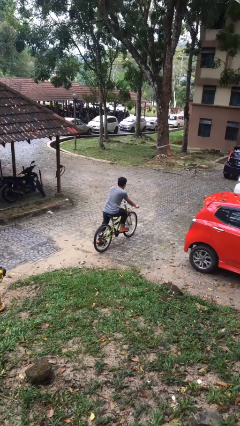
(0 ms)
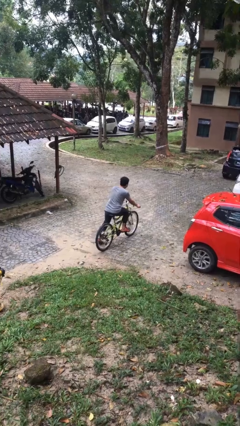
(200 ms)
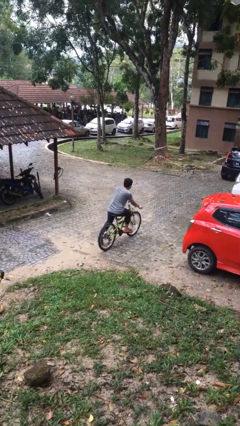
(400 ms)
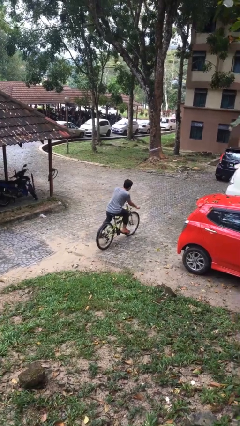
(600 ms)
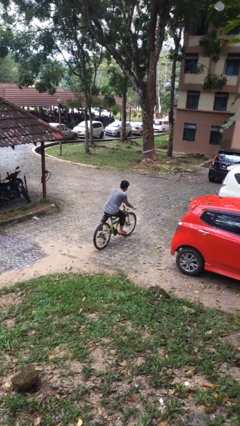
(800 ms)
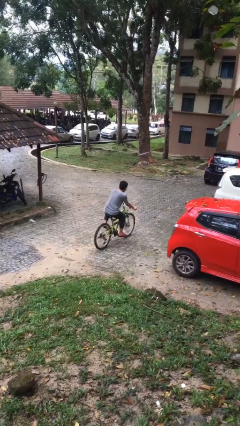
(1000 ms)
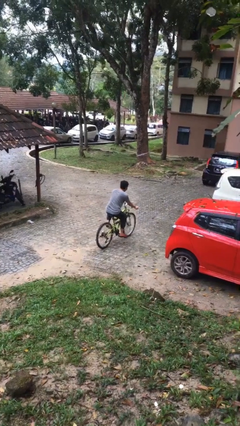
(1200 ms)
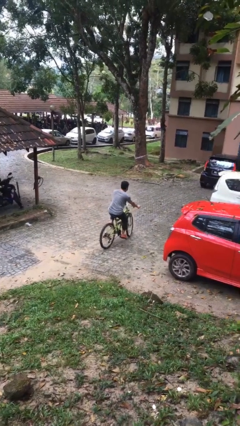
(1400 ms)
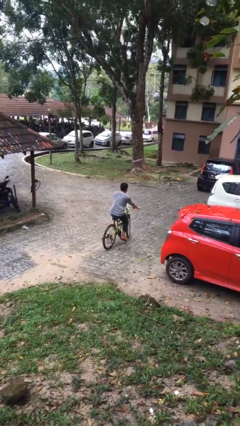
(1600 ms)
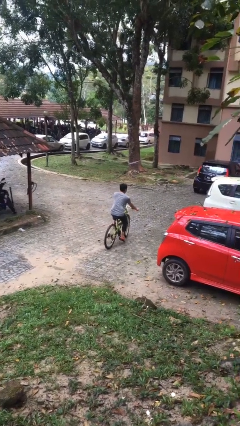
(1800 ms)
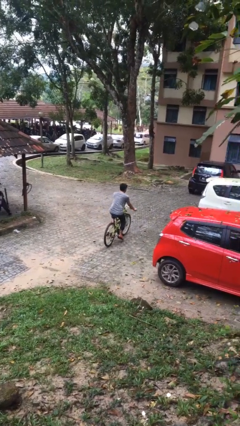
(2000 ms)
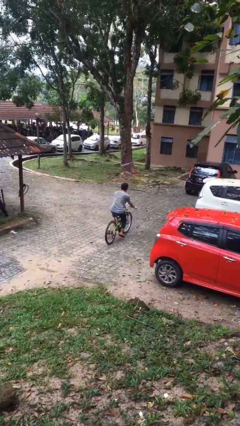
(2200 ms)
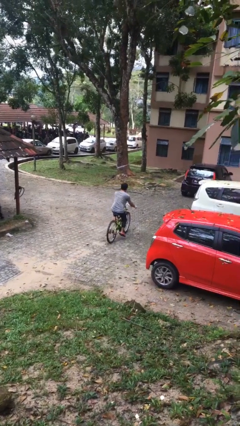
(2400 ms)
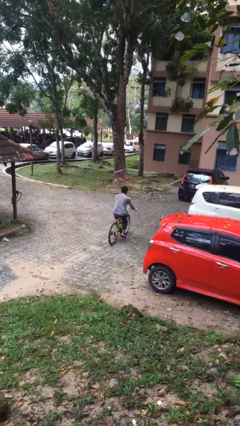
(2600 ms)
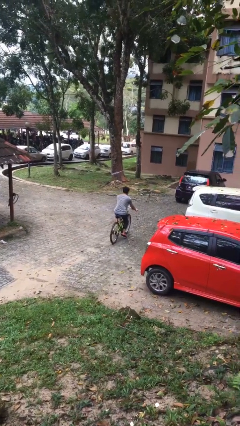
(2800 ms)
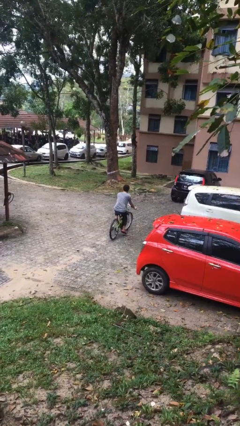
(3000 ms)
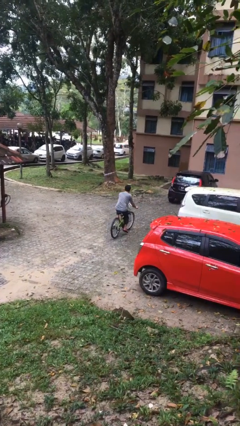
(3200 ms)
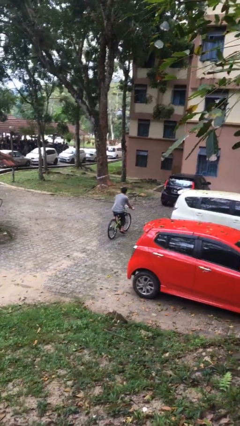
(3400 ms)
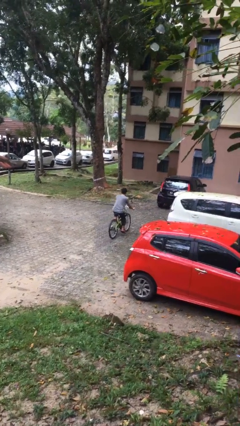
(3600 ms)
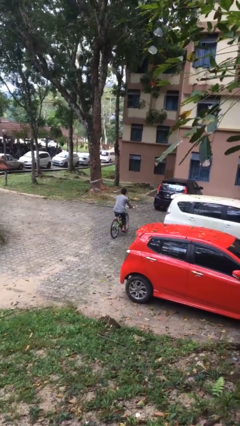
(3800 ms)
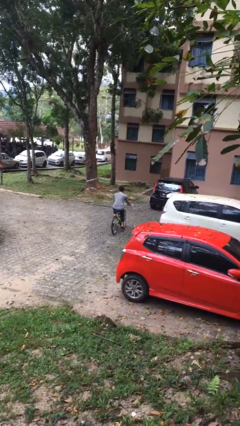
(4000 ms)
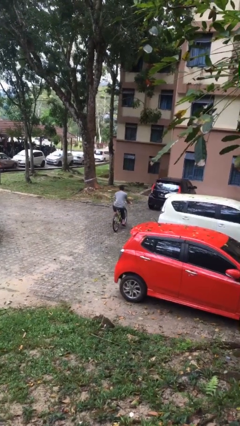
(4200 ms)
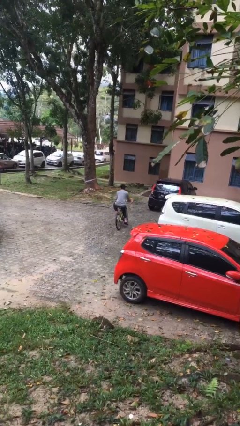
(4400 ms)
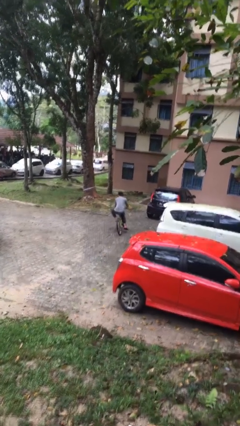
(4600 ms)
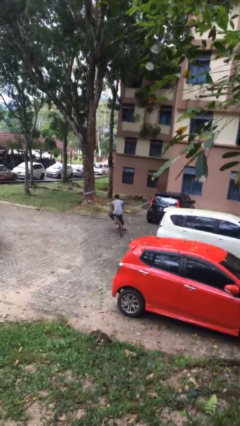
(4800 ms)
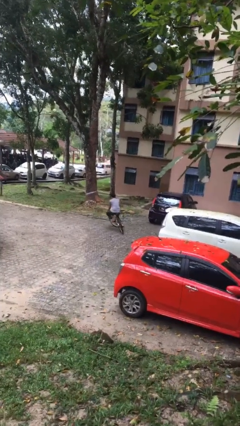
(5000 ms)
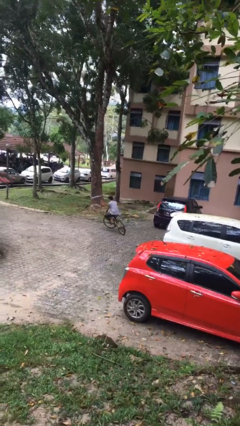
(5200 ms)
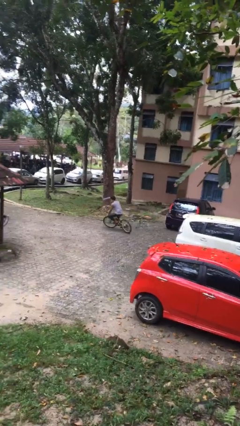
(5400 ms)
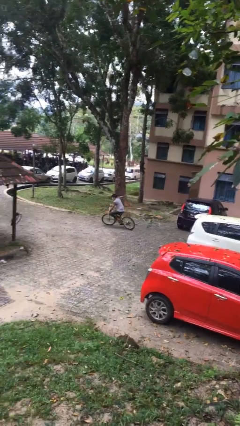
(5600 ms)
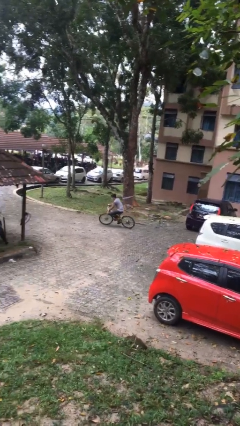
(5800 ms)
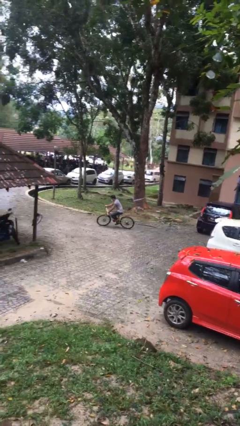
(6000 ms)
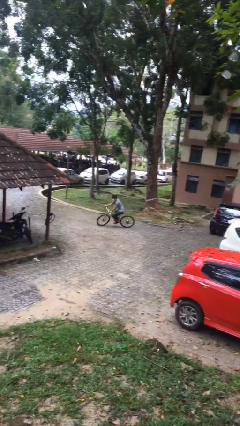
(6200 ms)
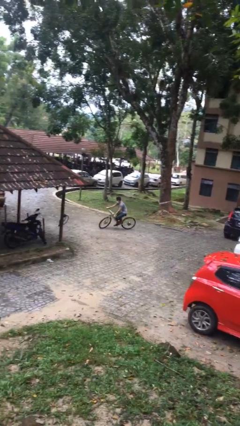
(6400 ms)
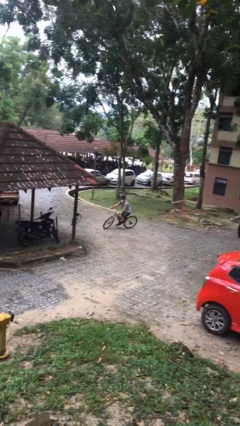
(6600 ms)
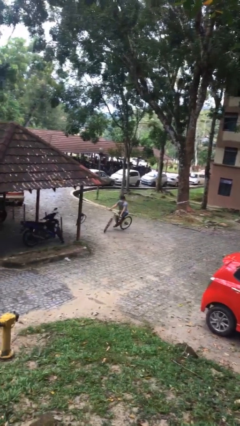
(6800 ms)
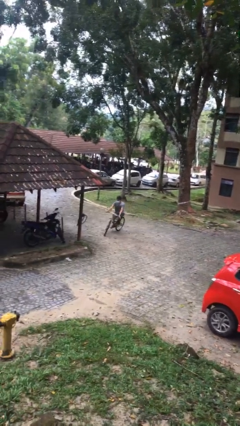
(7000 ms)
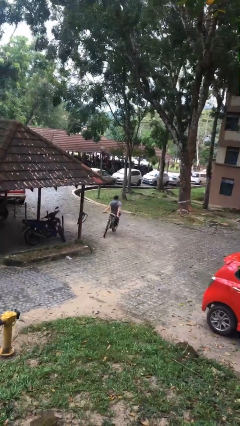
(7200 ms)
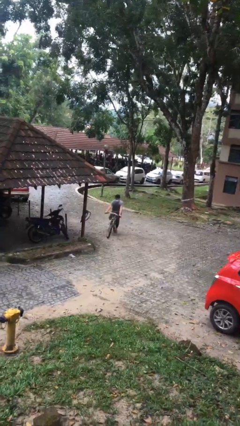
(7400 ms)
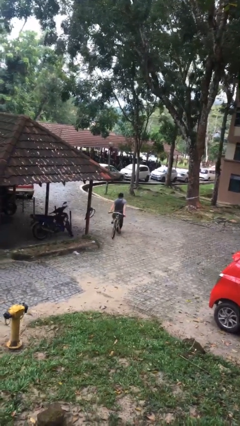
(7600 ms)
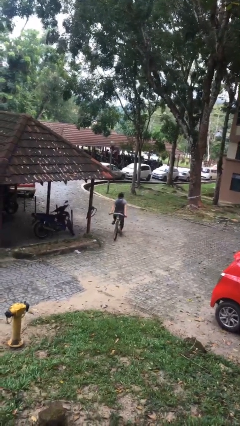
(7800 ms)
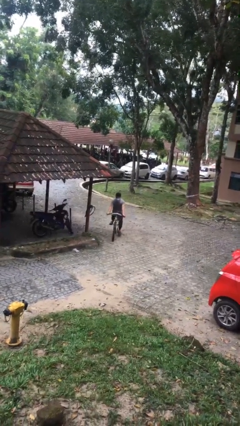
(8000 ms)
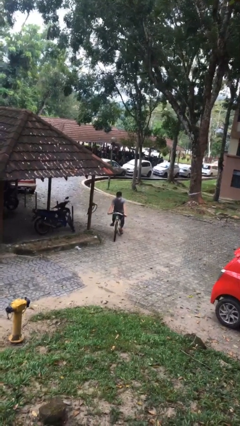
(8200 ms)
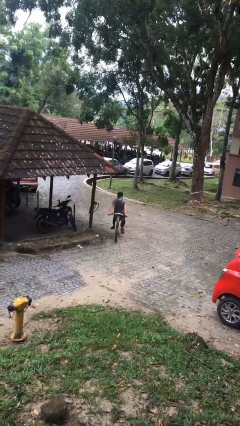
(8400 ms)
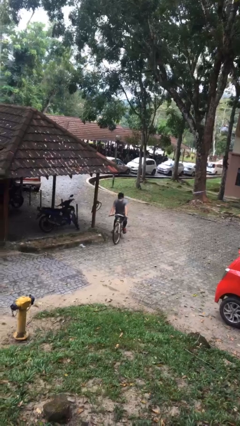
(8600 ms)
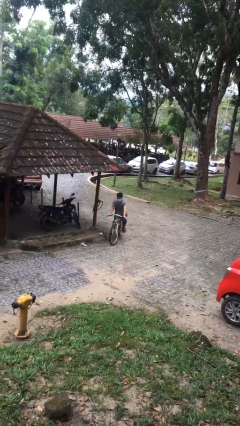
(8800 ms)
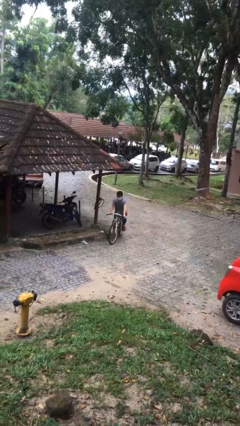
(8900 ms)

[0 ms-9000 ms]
person rides bicycle

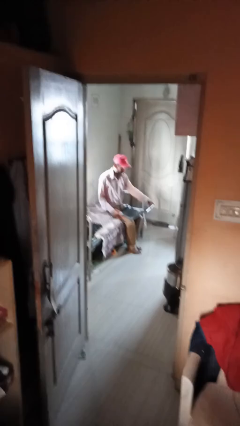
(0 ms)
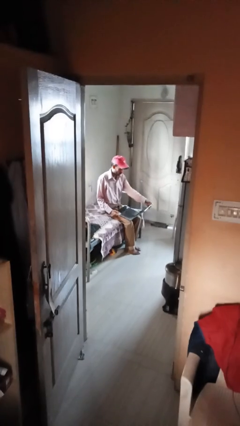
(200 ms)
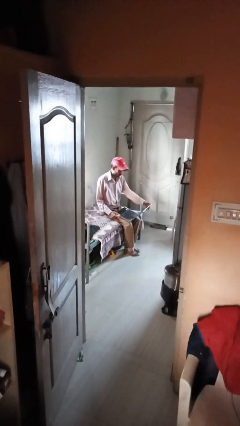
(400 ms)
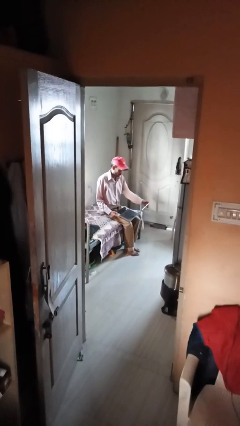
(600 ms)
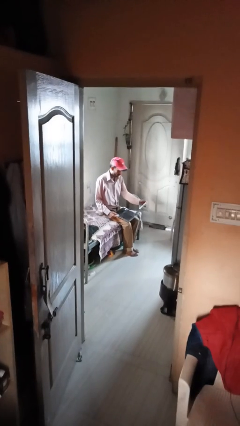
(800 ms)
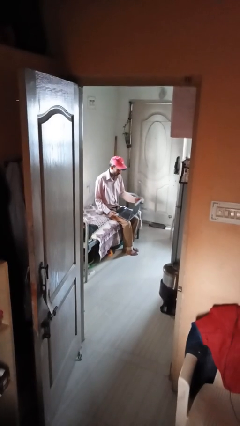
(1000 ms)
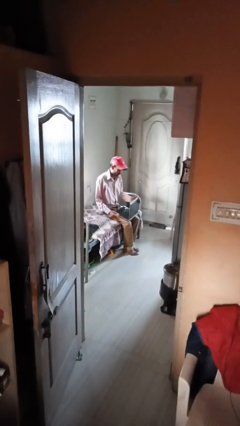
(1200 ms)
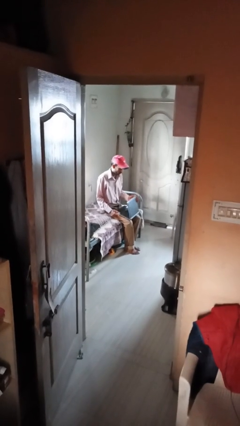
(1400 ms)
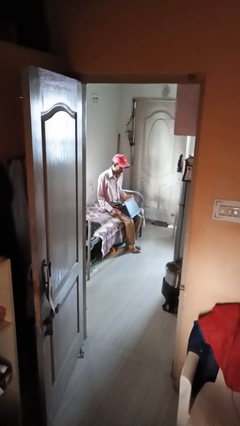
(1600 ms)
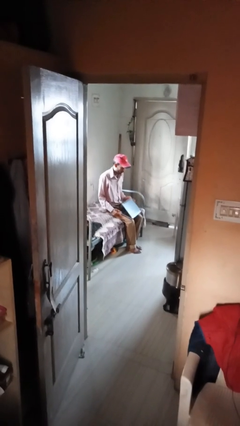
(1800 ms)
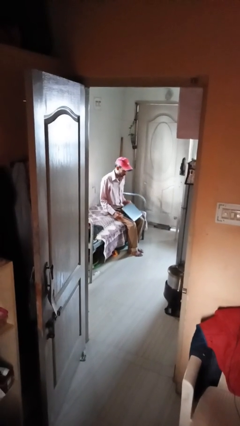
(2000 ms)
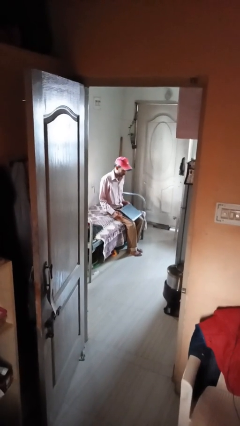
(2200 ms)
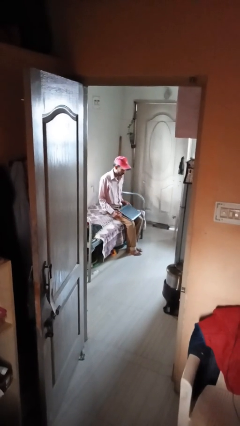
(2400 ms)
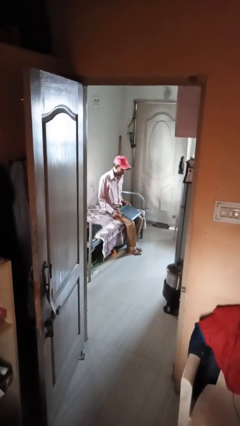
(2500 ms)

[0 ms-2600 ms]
person closes laptop

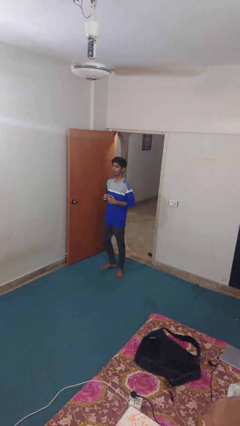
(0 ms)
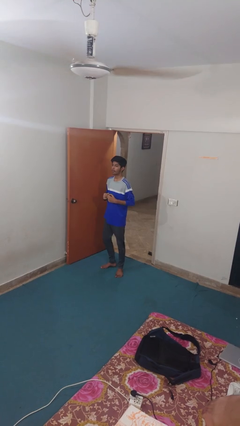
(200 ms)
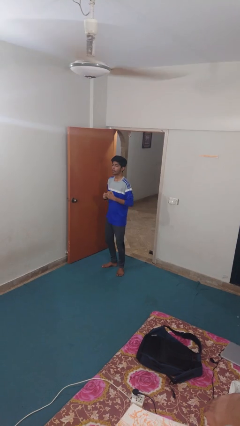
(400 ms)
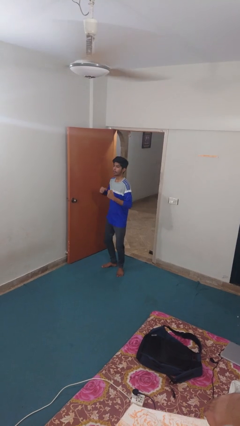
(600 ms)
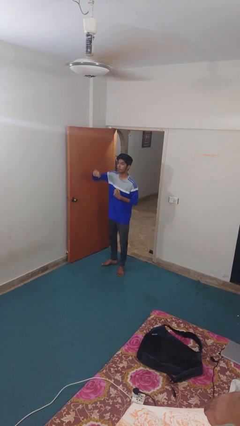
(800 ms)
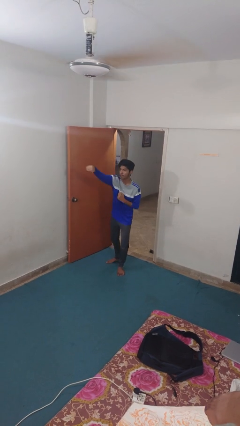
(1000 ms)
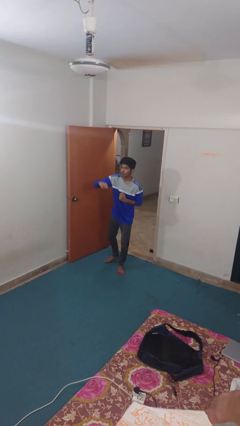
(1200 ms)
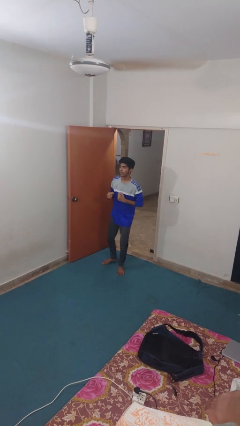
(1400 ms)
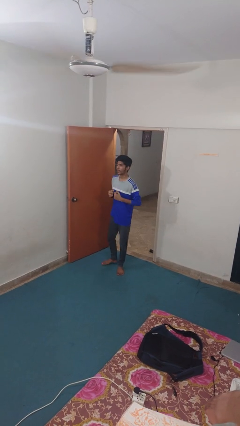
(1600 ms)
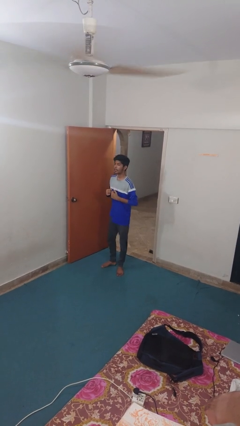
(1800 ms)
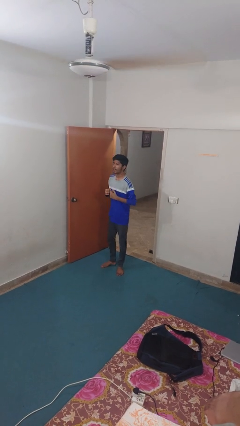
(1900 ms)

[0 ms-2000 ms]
person punches

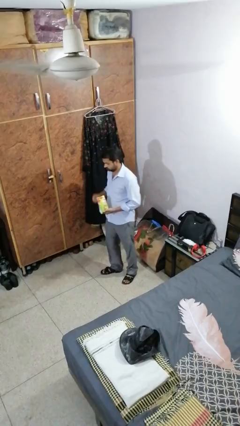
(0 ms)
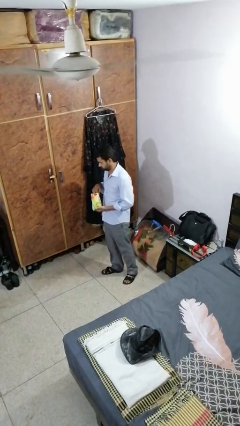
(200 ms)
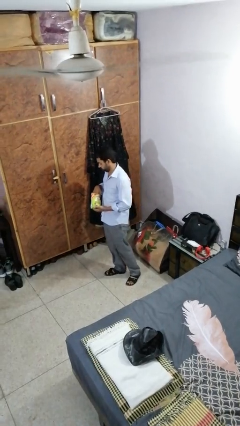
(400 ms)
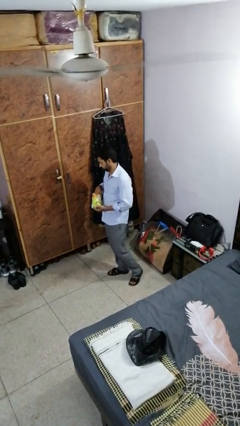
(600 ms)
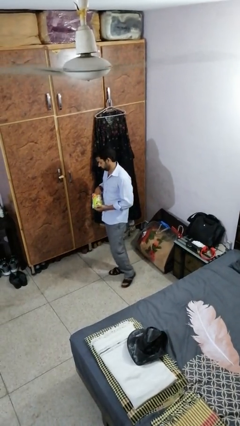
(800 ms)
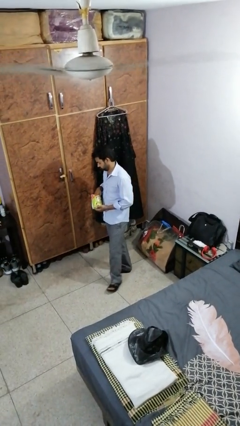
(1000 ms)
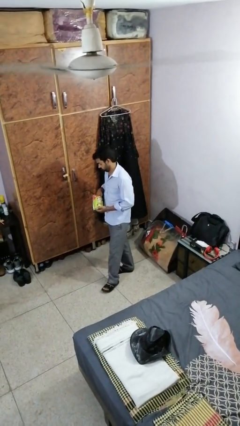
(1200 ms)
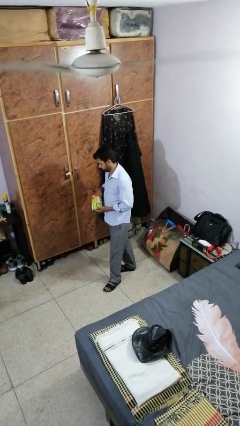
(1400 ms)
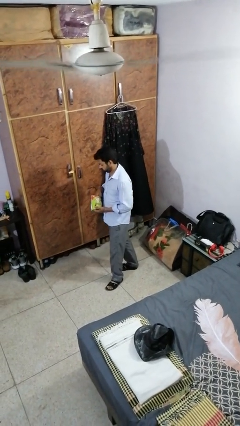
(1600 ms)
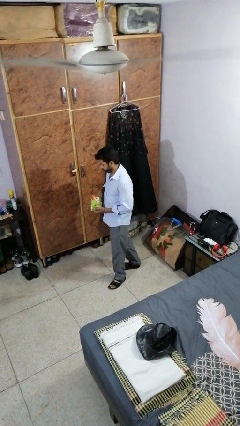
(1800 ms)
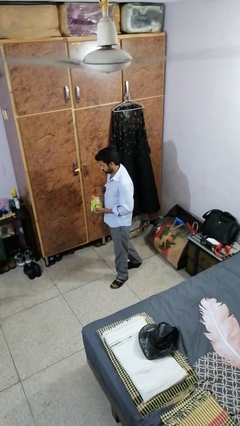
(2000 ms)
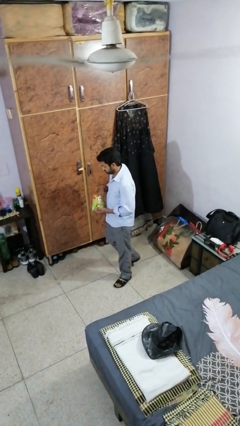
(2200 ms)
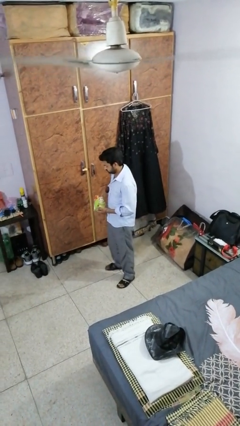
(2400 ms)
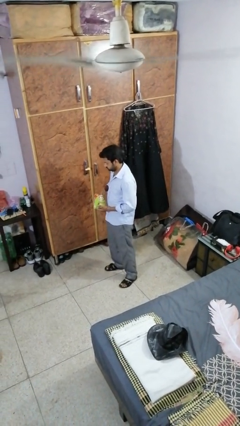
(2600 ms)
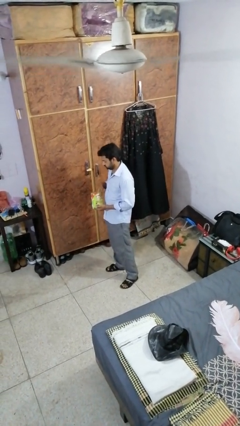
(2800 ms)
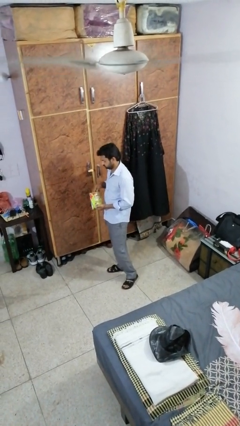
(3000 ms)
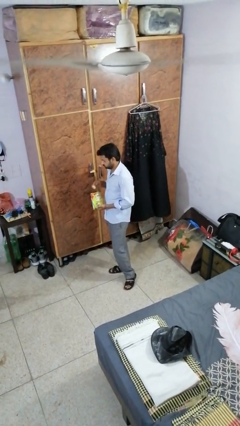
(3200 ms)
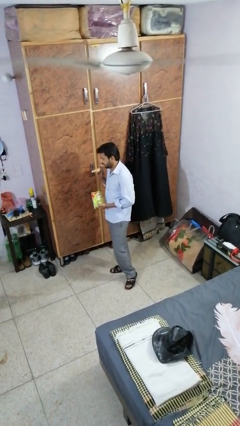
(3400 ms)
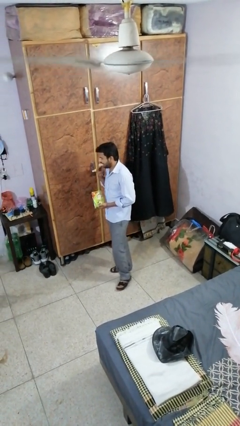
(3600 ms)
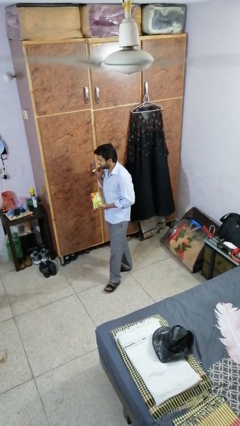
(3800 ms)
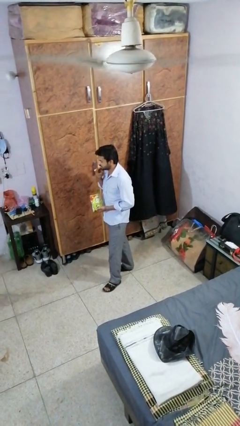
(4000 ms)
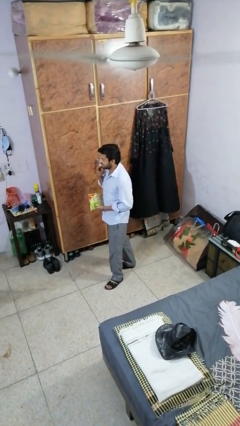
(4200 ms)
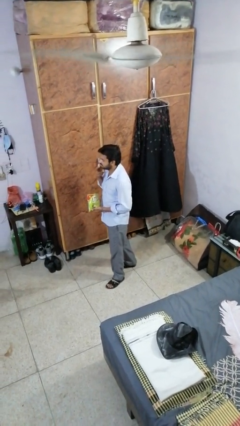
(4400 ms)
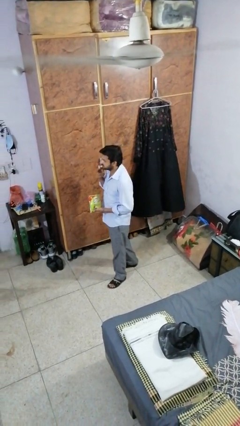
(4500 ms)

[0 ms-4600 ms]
person eats snack from bag
